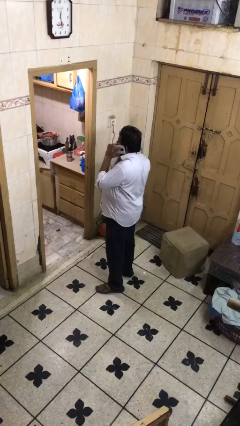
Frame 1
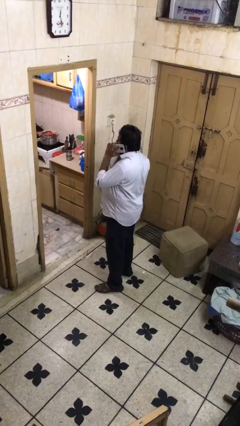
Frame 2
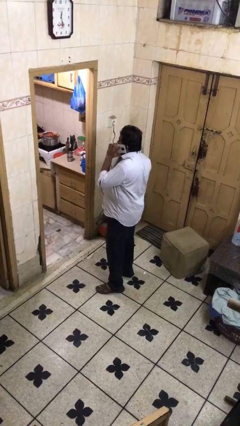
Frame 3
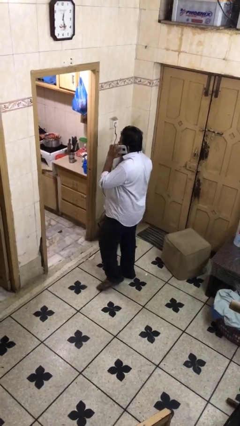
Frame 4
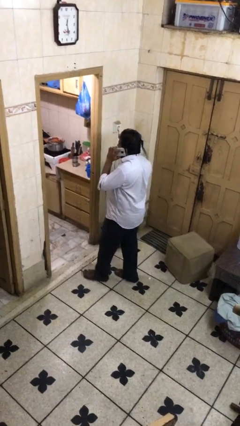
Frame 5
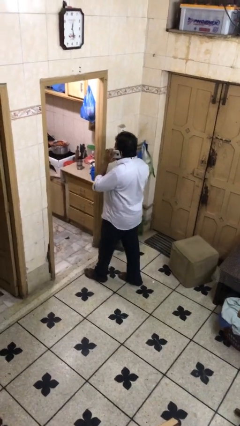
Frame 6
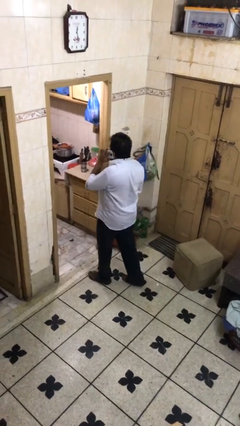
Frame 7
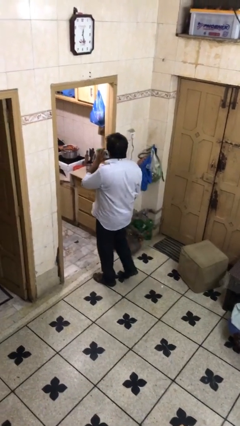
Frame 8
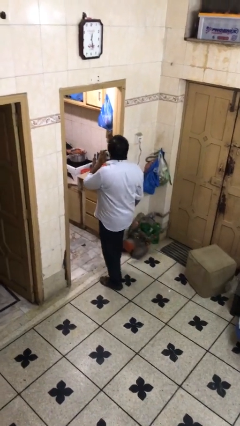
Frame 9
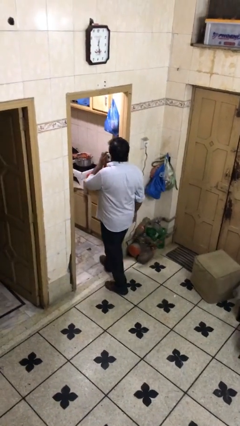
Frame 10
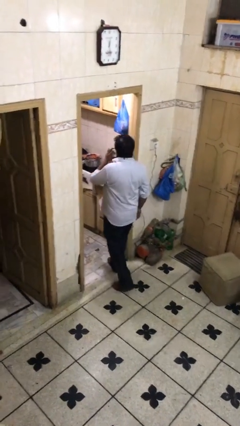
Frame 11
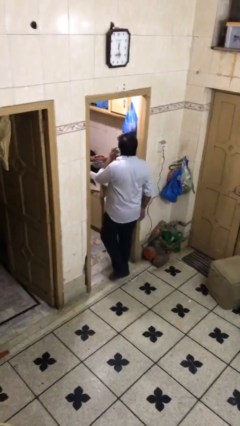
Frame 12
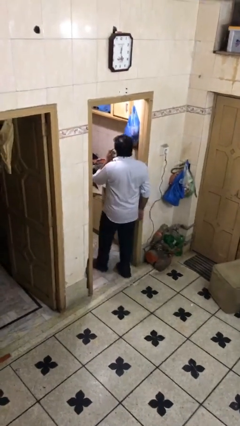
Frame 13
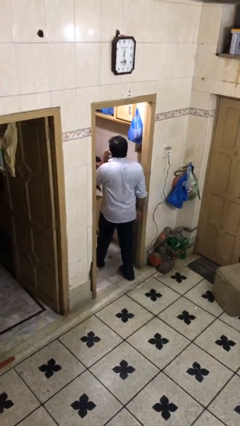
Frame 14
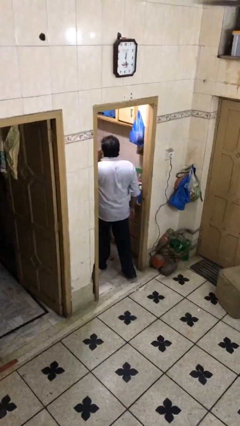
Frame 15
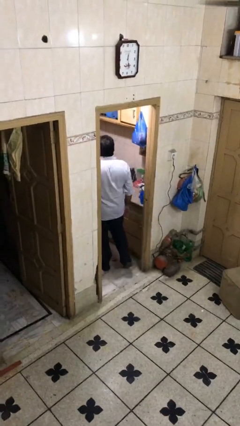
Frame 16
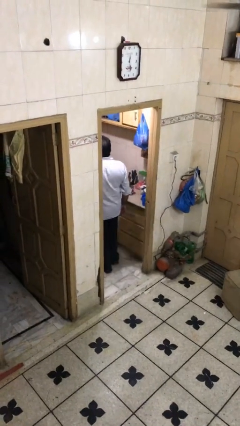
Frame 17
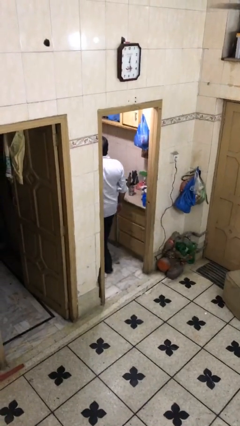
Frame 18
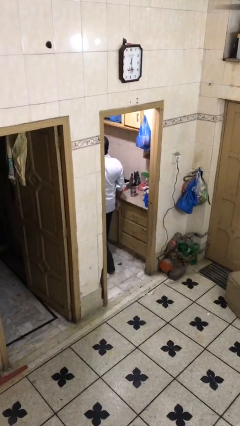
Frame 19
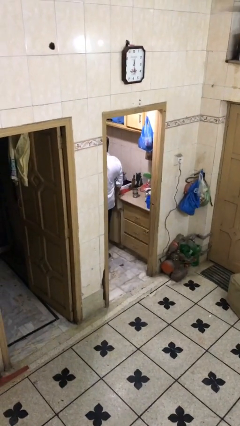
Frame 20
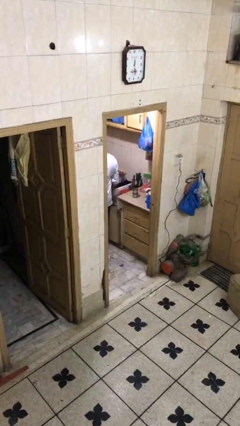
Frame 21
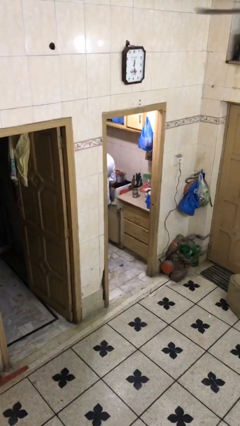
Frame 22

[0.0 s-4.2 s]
person exits scene through structure

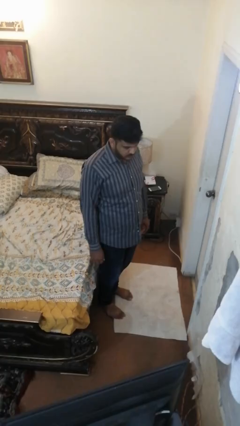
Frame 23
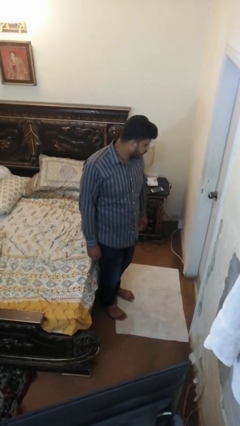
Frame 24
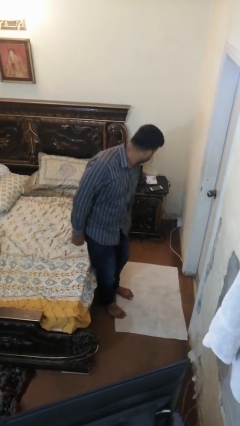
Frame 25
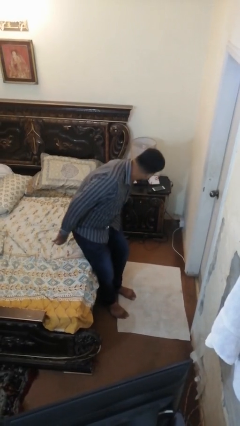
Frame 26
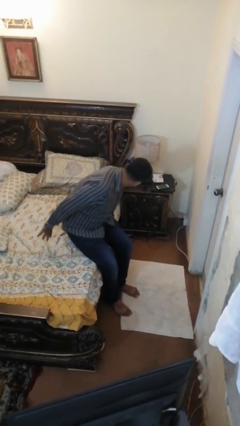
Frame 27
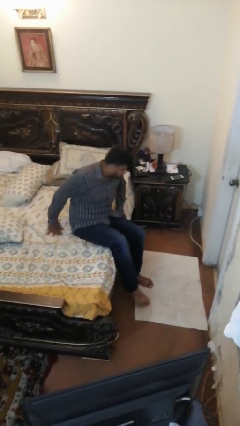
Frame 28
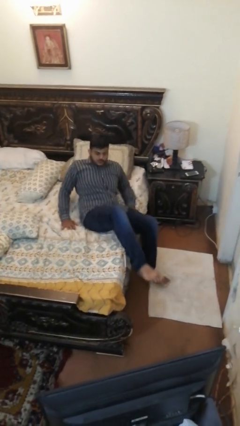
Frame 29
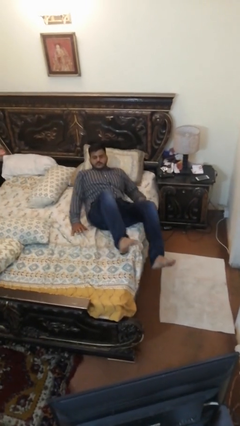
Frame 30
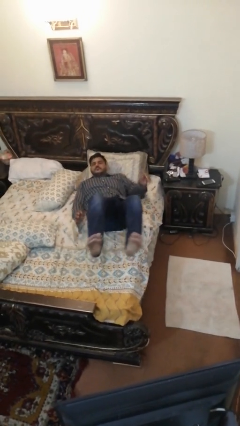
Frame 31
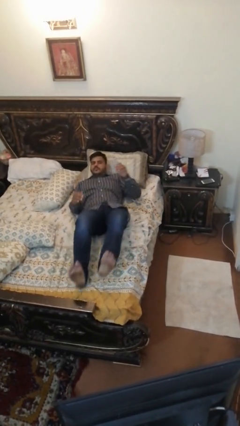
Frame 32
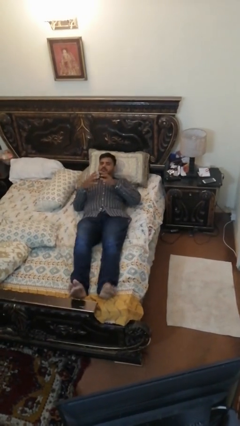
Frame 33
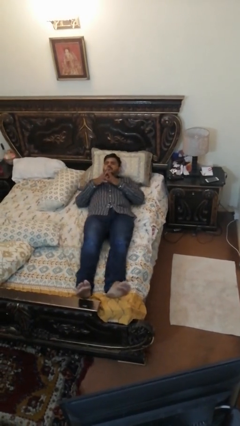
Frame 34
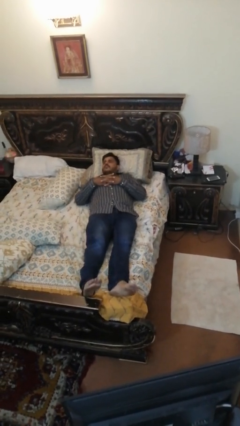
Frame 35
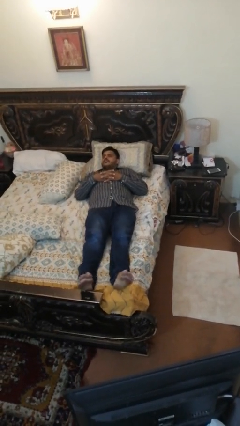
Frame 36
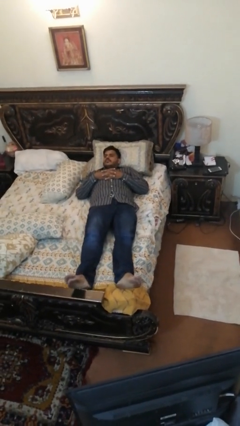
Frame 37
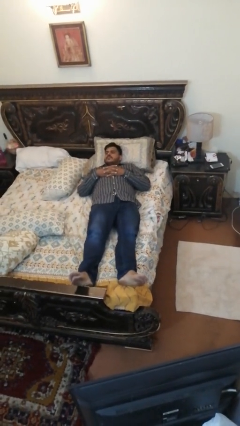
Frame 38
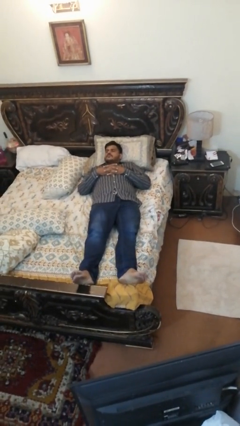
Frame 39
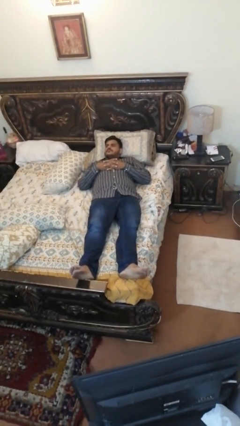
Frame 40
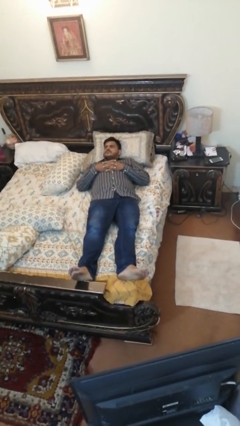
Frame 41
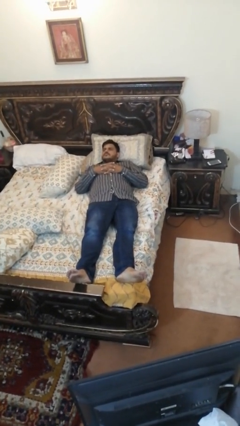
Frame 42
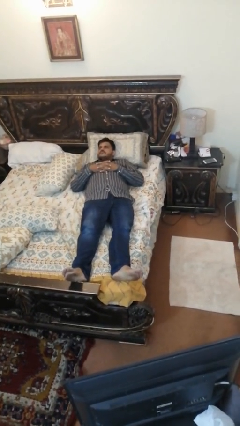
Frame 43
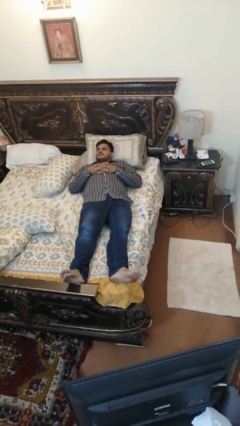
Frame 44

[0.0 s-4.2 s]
person lies down on bed

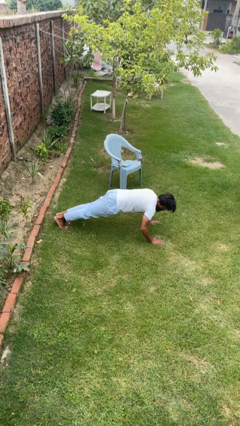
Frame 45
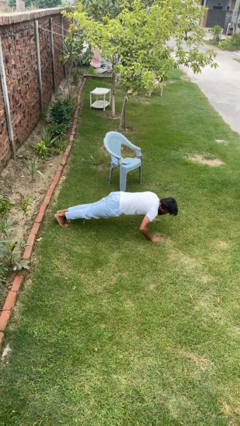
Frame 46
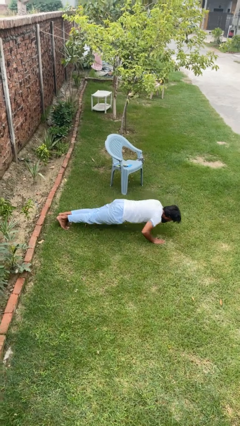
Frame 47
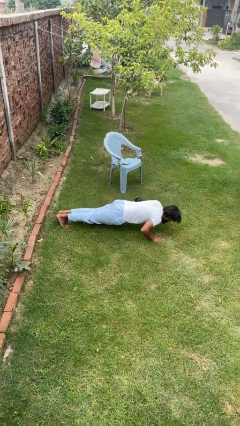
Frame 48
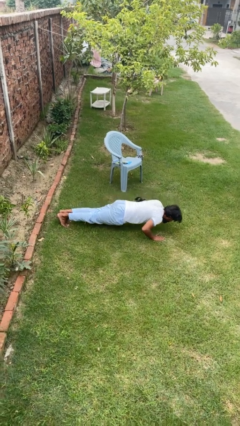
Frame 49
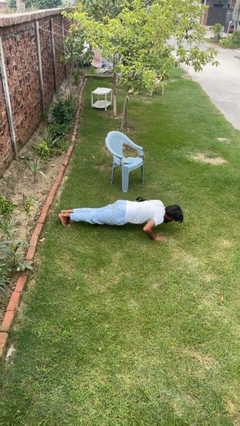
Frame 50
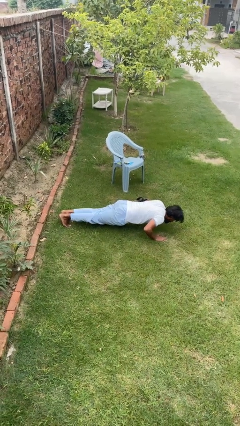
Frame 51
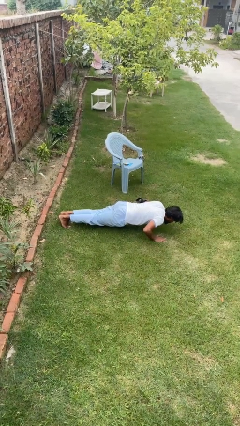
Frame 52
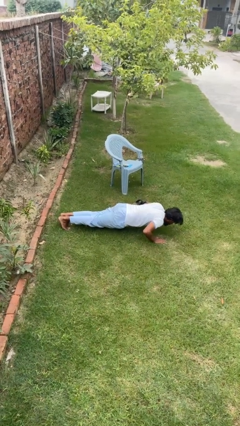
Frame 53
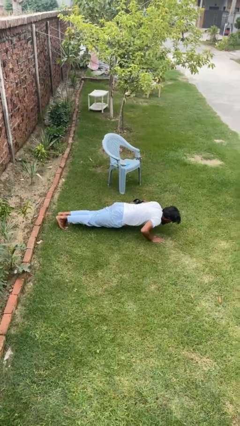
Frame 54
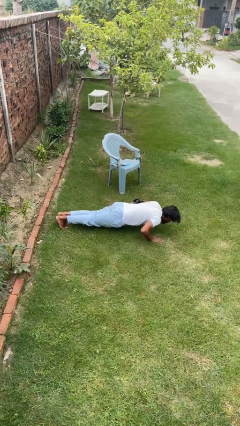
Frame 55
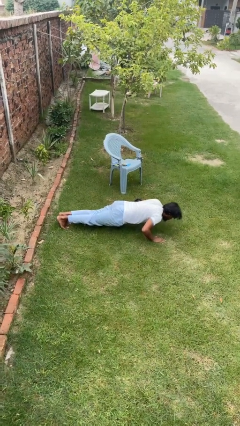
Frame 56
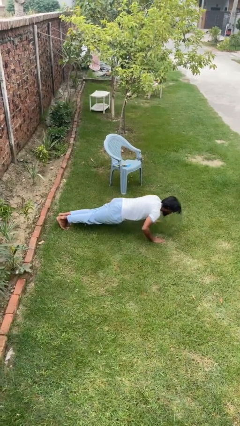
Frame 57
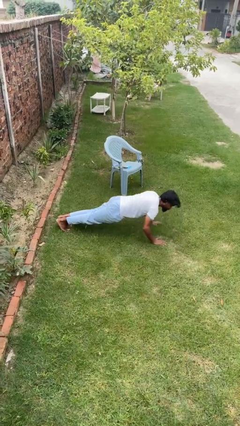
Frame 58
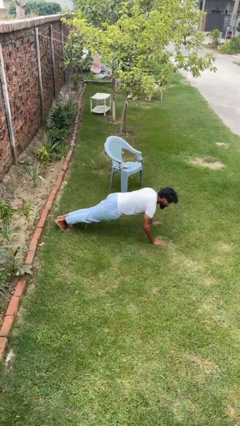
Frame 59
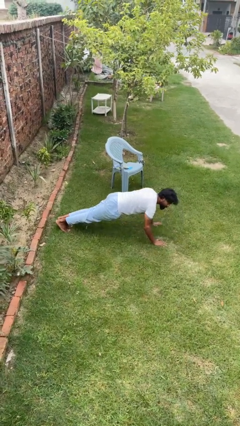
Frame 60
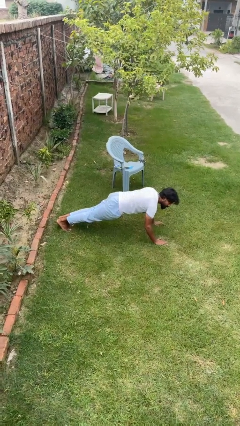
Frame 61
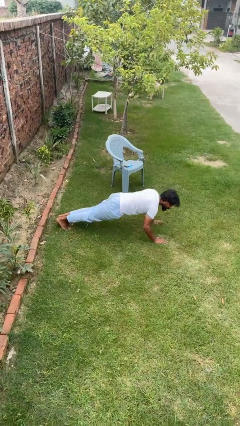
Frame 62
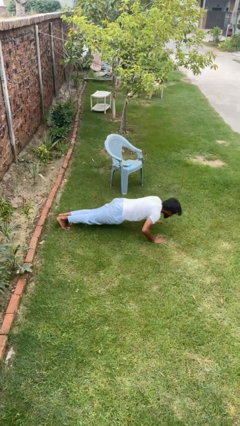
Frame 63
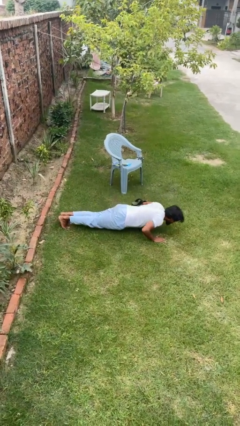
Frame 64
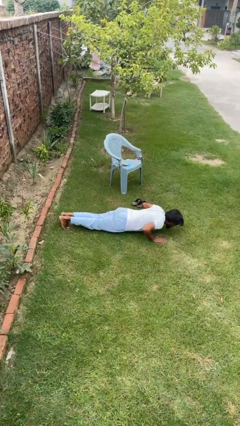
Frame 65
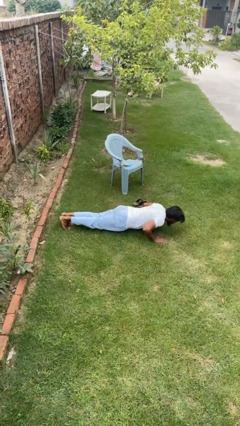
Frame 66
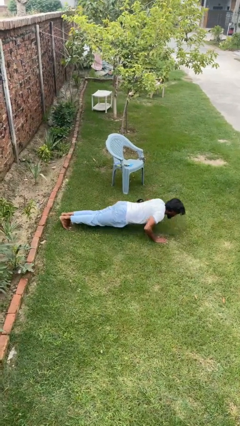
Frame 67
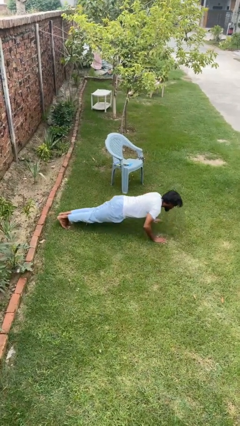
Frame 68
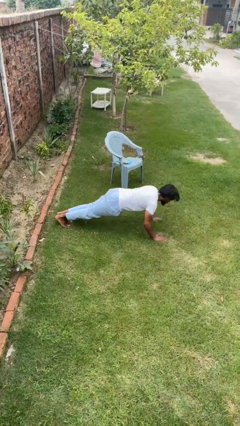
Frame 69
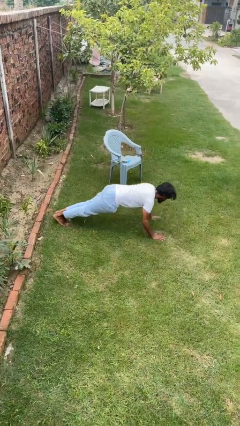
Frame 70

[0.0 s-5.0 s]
person exercises with pushup

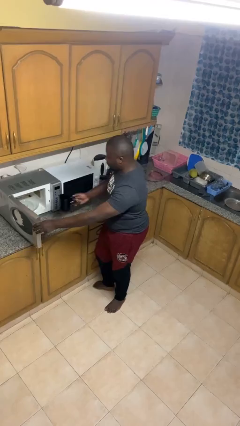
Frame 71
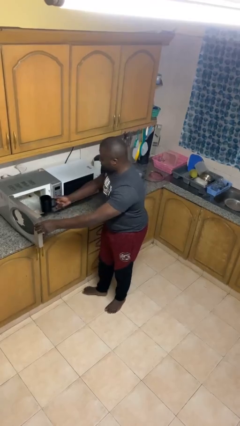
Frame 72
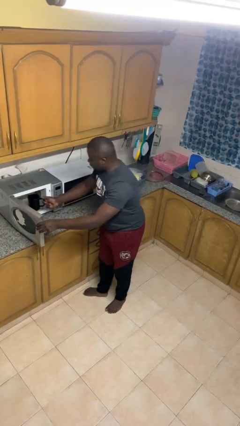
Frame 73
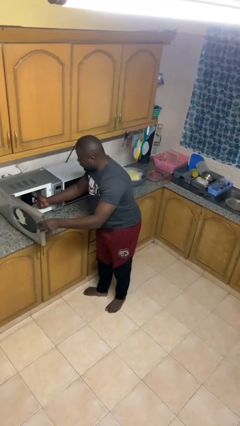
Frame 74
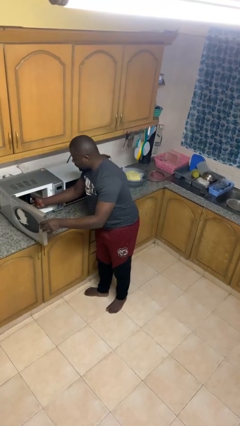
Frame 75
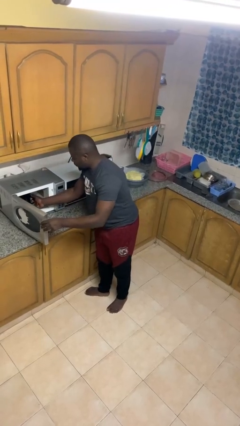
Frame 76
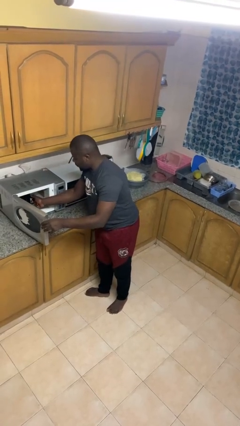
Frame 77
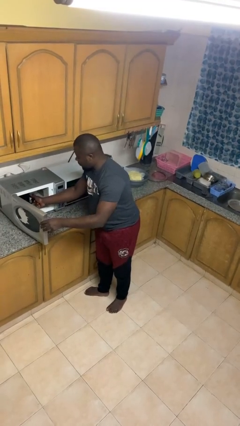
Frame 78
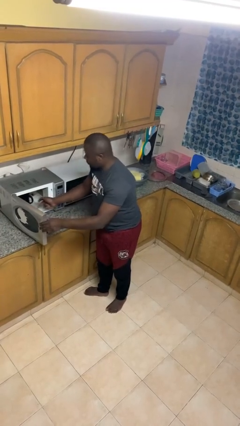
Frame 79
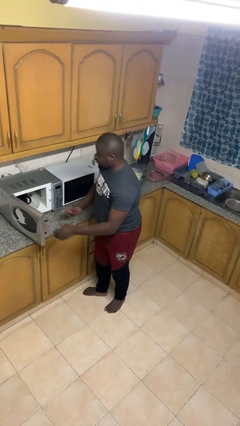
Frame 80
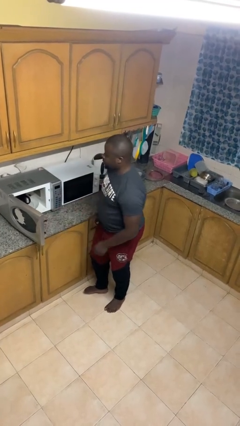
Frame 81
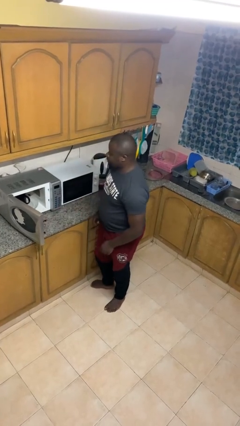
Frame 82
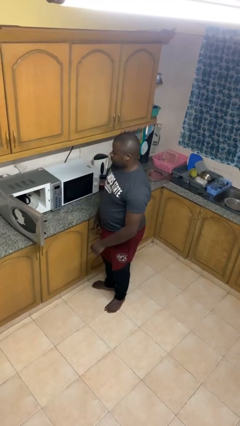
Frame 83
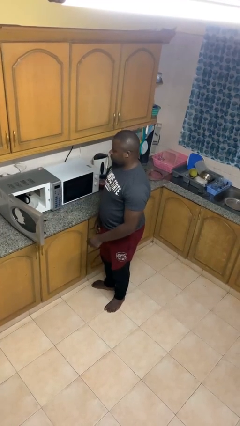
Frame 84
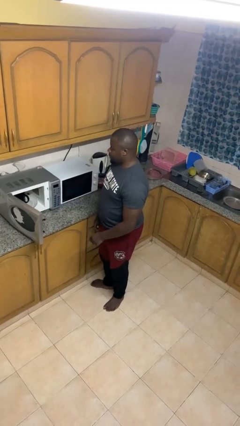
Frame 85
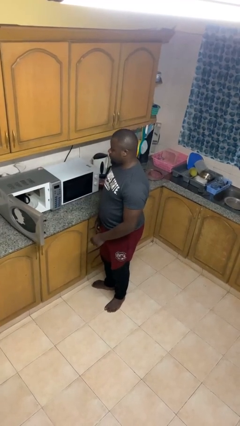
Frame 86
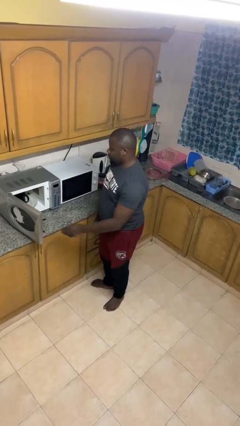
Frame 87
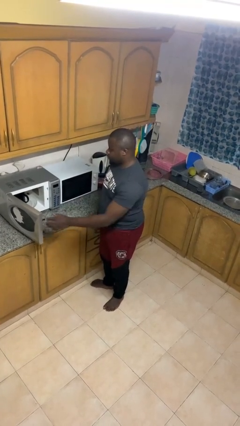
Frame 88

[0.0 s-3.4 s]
person puts object into microwave

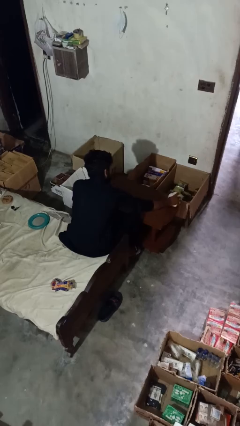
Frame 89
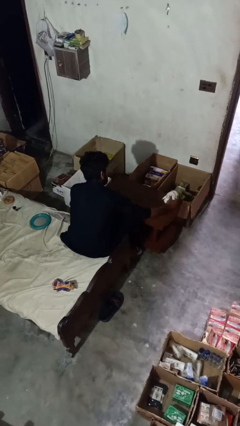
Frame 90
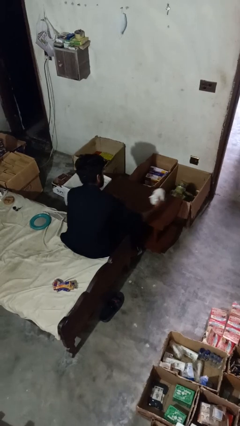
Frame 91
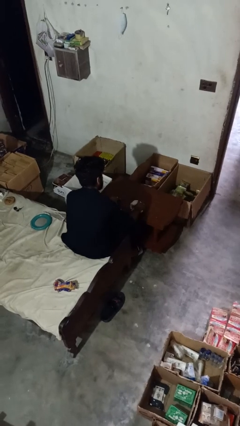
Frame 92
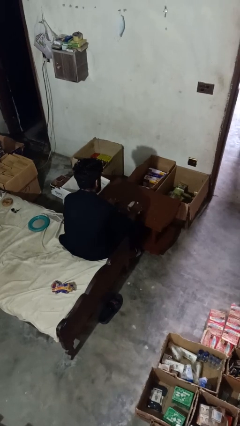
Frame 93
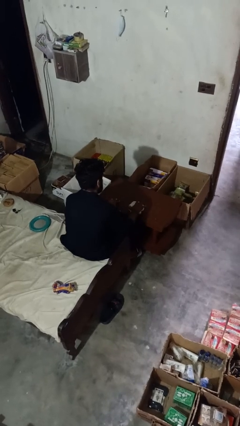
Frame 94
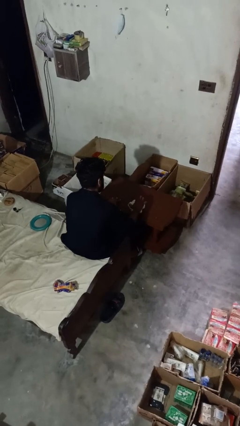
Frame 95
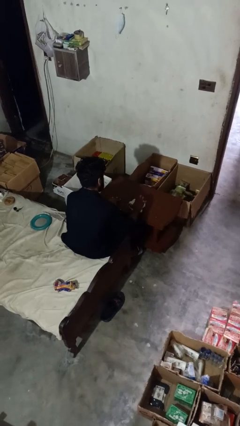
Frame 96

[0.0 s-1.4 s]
person cleans table with rag
